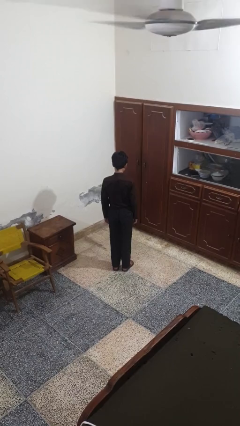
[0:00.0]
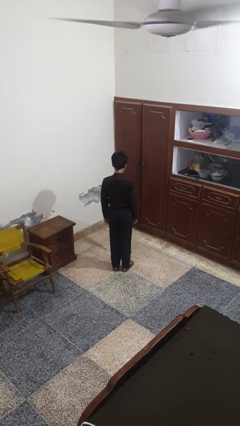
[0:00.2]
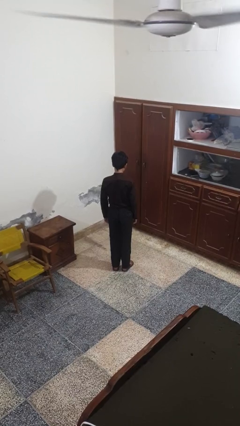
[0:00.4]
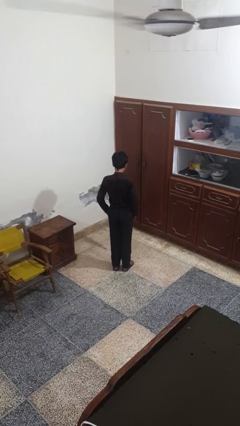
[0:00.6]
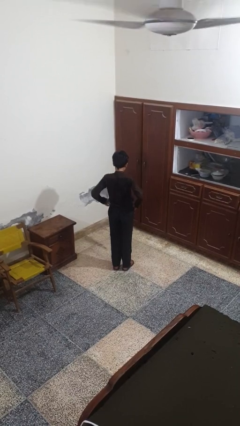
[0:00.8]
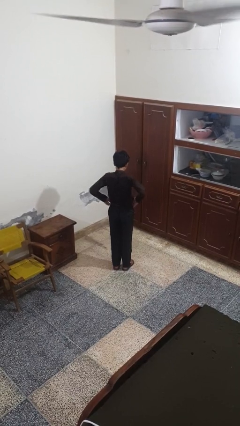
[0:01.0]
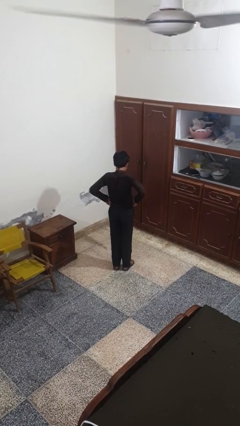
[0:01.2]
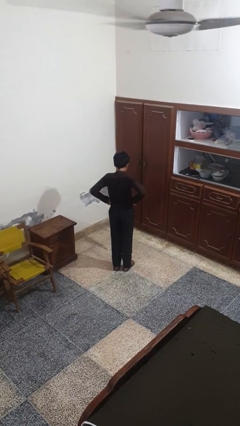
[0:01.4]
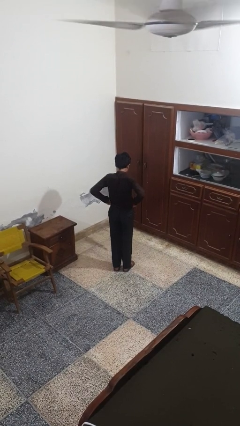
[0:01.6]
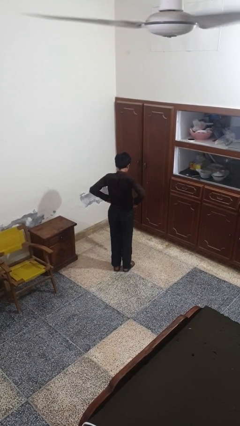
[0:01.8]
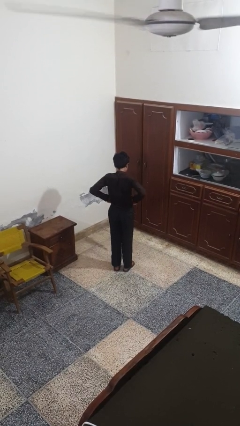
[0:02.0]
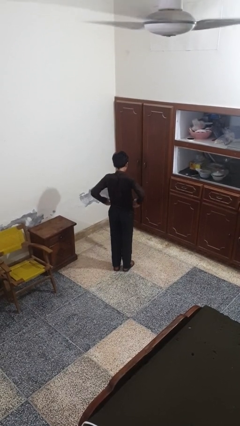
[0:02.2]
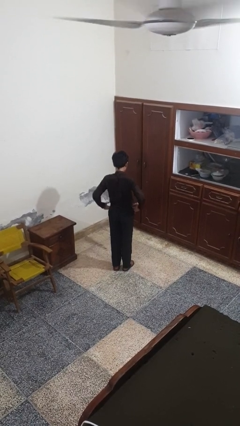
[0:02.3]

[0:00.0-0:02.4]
person hikes up pants

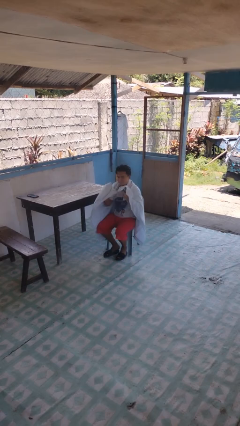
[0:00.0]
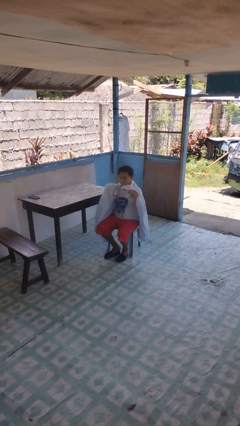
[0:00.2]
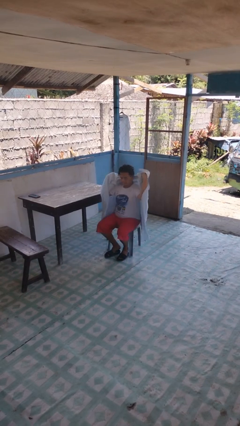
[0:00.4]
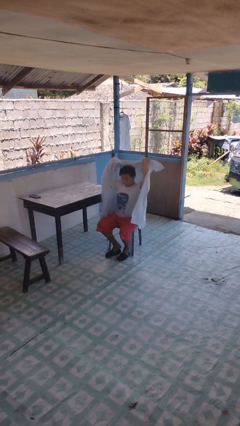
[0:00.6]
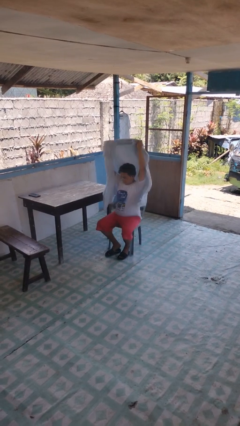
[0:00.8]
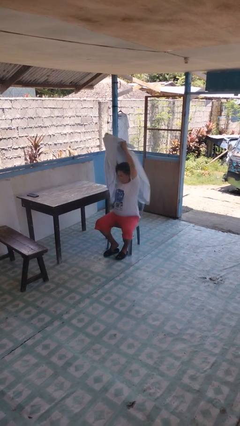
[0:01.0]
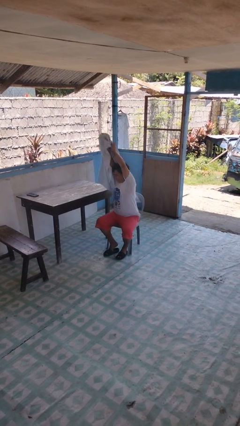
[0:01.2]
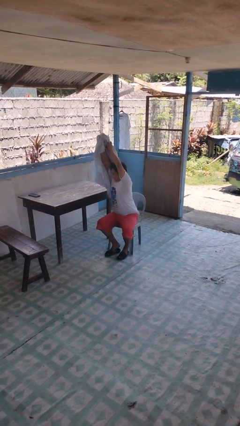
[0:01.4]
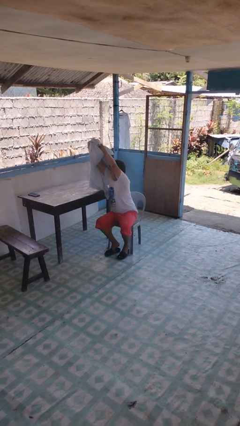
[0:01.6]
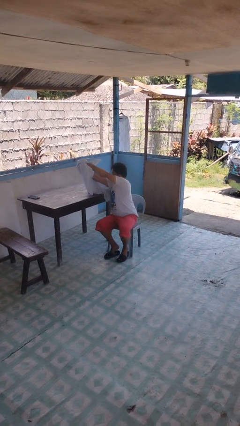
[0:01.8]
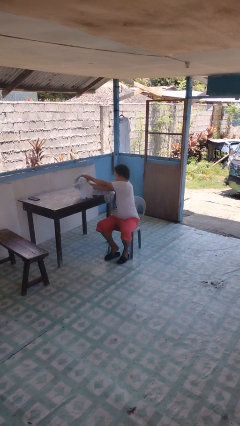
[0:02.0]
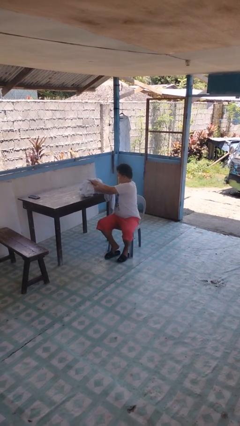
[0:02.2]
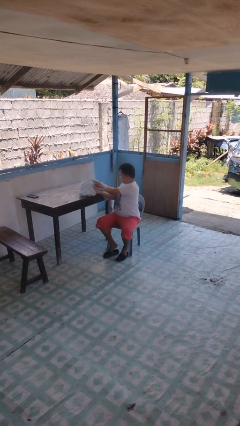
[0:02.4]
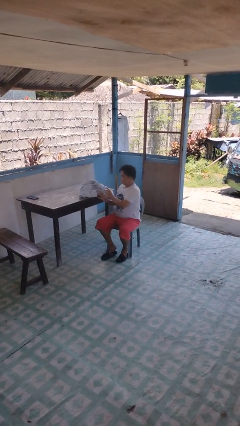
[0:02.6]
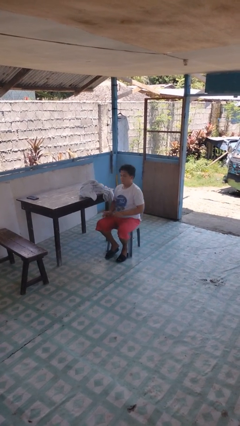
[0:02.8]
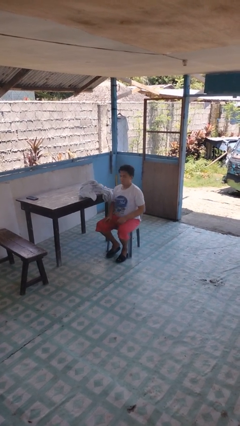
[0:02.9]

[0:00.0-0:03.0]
person uncovers with blanket

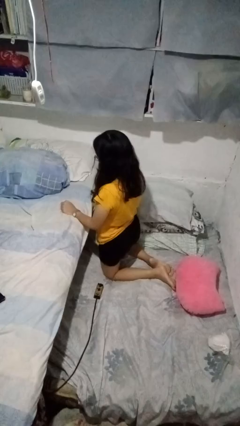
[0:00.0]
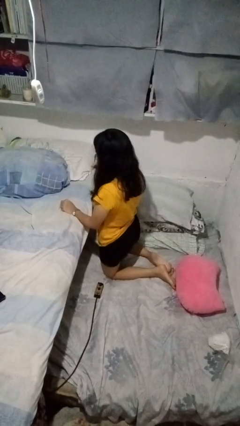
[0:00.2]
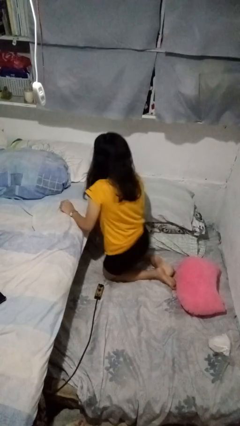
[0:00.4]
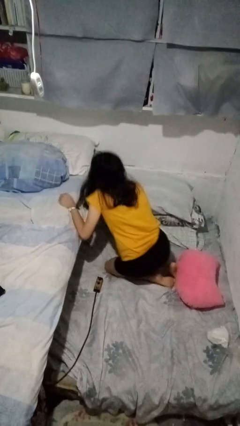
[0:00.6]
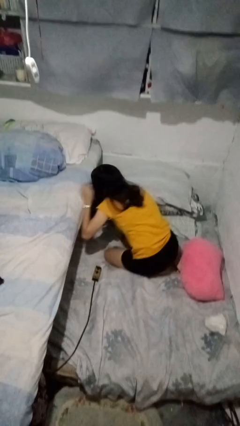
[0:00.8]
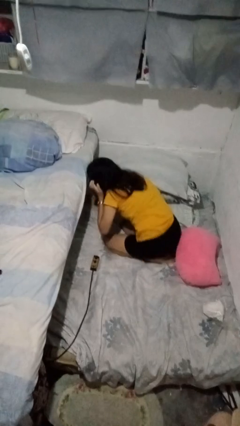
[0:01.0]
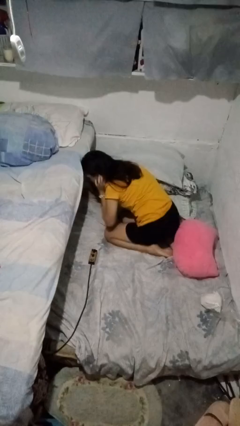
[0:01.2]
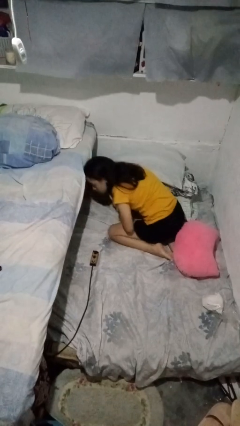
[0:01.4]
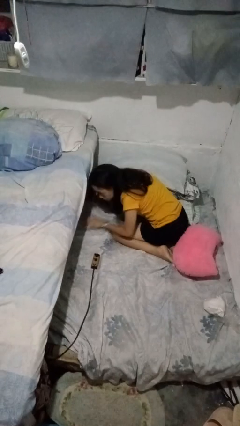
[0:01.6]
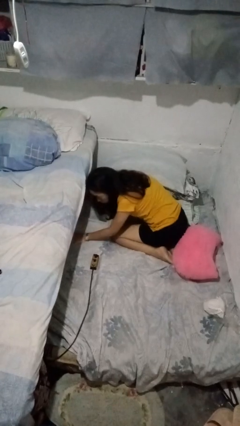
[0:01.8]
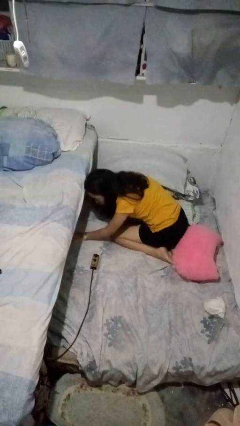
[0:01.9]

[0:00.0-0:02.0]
person searches under bed

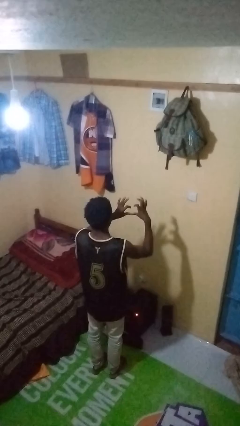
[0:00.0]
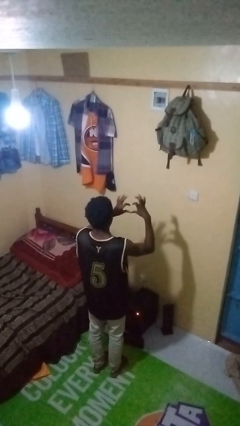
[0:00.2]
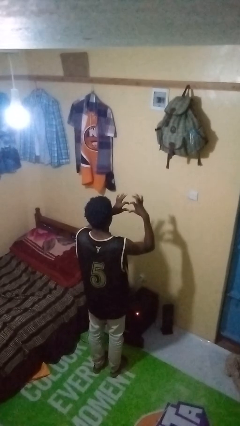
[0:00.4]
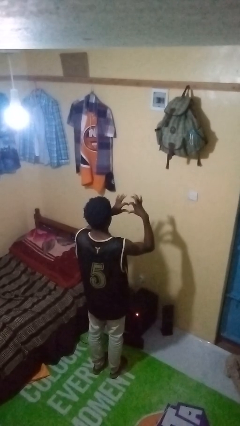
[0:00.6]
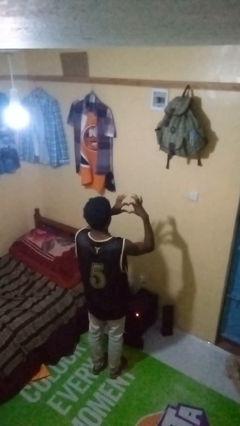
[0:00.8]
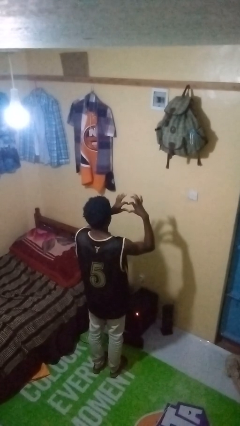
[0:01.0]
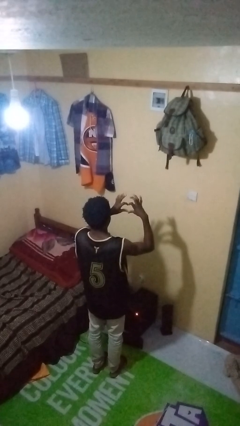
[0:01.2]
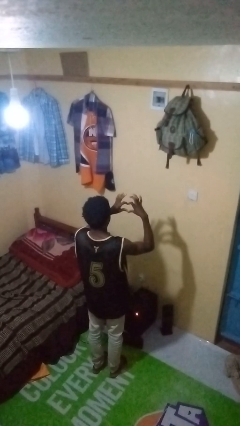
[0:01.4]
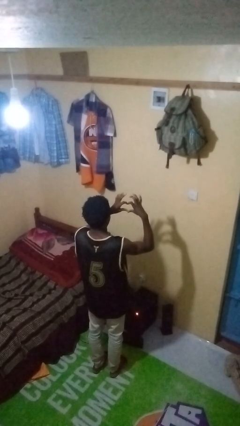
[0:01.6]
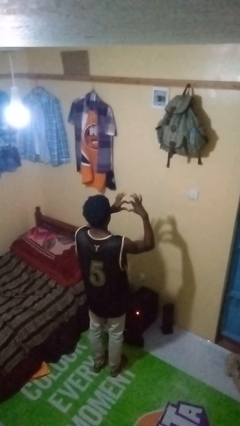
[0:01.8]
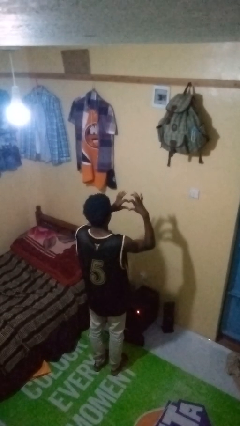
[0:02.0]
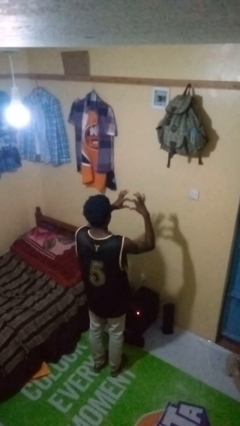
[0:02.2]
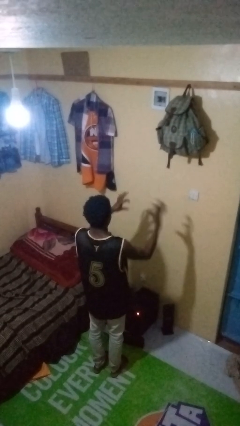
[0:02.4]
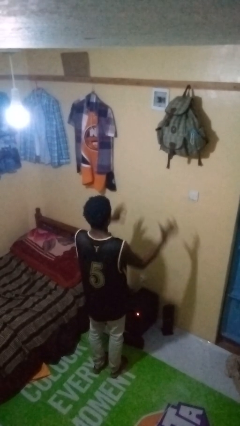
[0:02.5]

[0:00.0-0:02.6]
person gestures heart

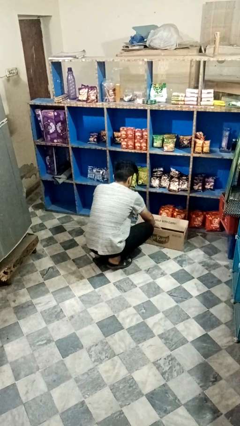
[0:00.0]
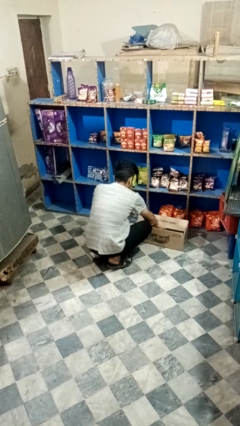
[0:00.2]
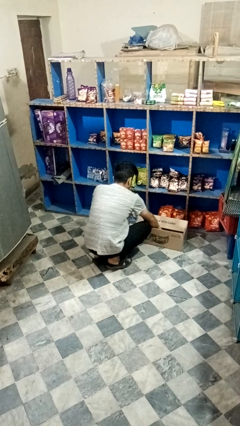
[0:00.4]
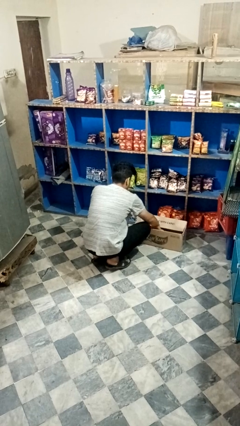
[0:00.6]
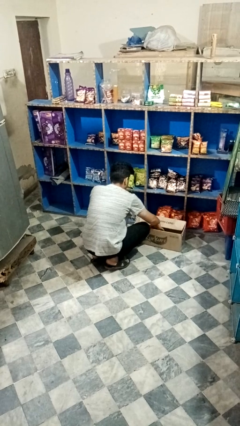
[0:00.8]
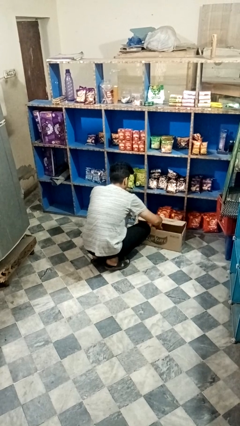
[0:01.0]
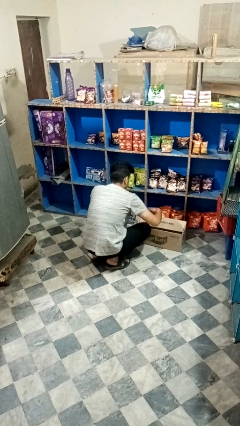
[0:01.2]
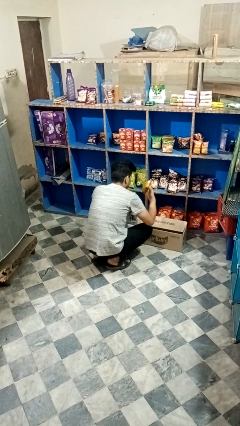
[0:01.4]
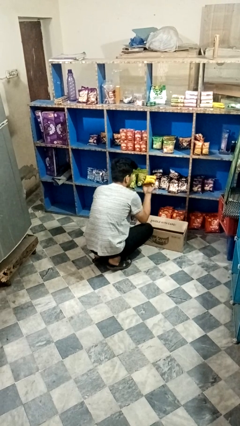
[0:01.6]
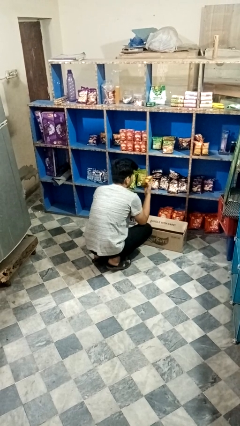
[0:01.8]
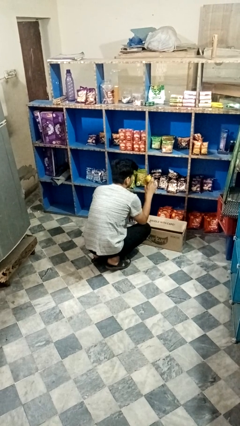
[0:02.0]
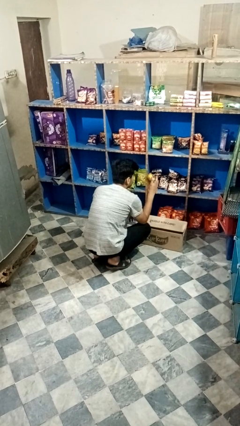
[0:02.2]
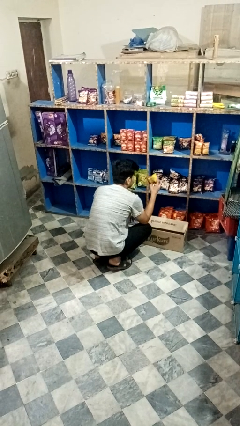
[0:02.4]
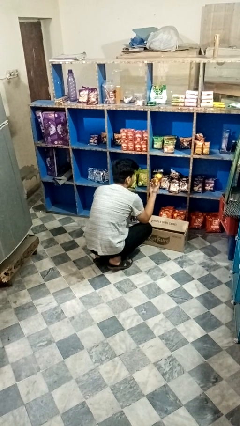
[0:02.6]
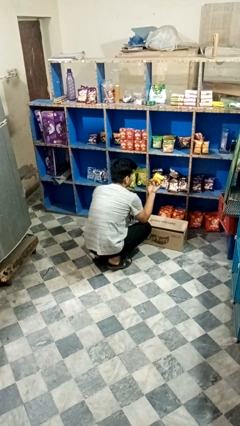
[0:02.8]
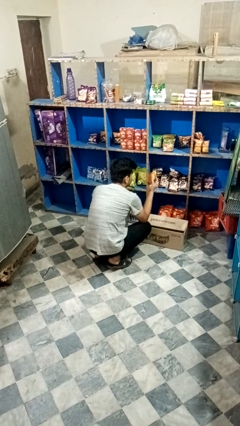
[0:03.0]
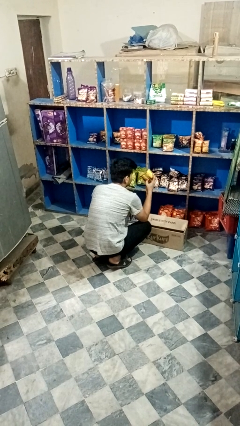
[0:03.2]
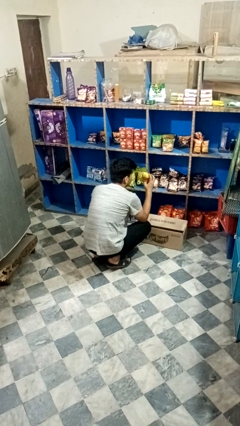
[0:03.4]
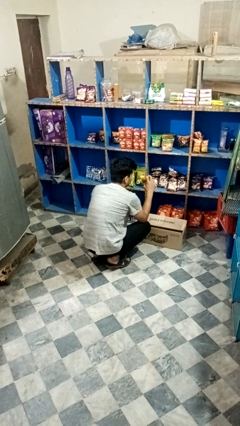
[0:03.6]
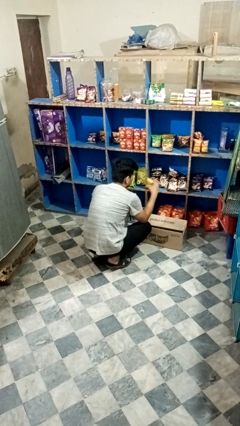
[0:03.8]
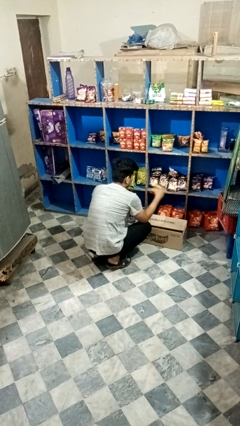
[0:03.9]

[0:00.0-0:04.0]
person takes object from box

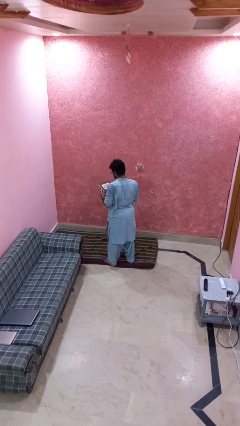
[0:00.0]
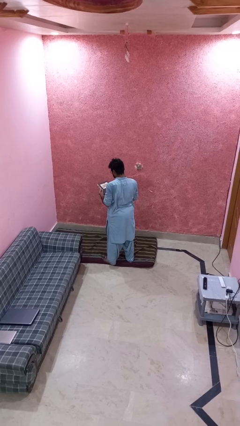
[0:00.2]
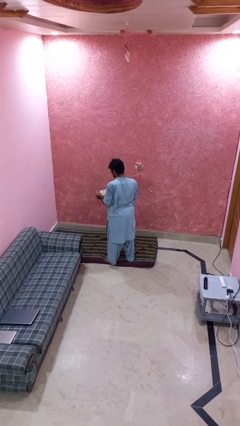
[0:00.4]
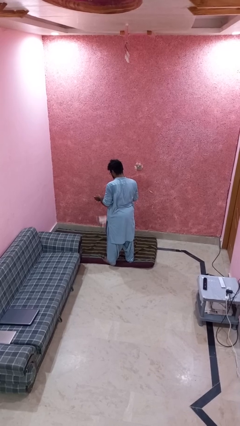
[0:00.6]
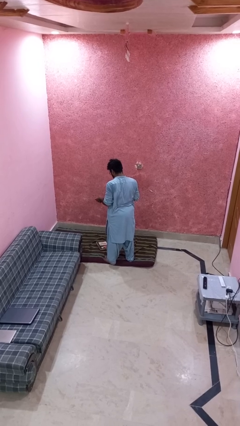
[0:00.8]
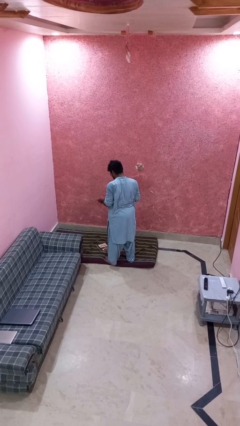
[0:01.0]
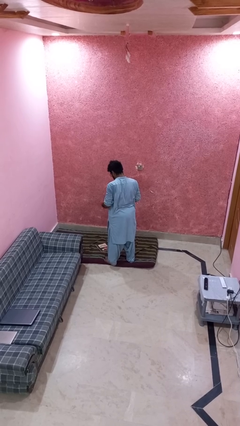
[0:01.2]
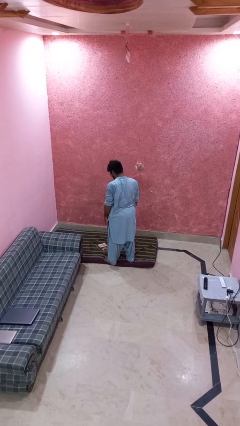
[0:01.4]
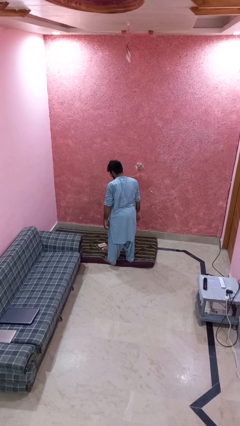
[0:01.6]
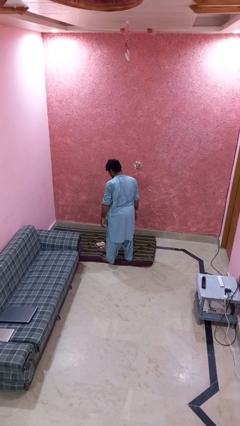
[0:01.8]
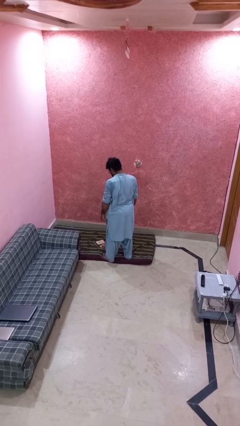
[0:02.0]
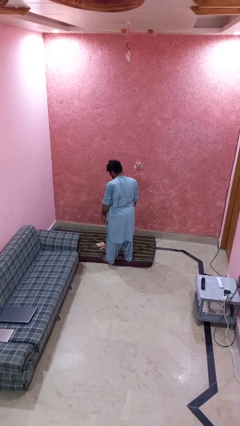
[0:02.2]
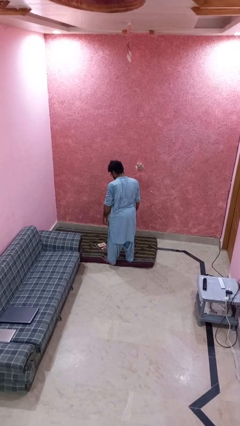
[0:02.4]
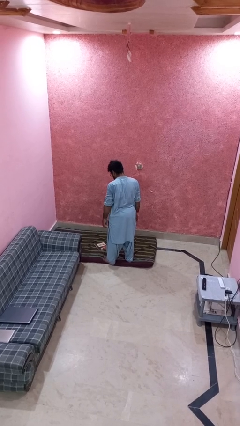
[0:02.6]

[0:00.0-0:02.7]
person drops object

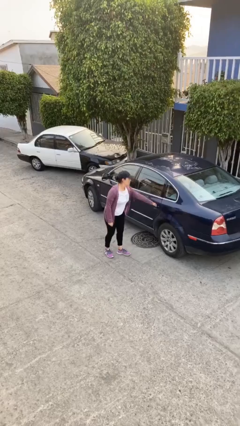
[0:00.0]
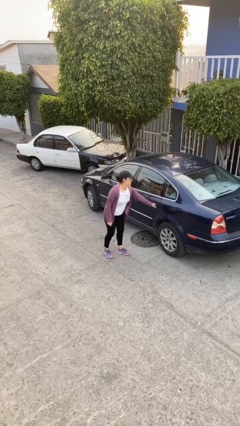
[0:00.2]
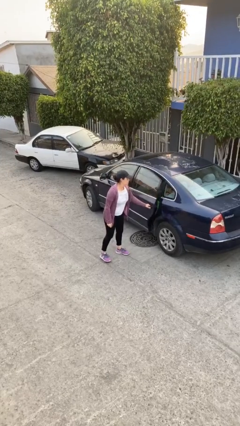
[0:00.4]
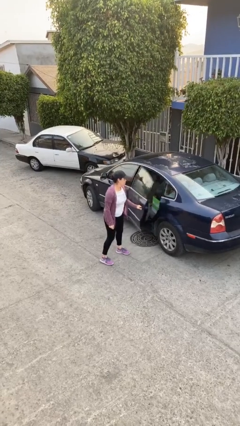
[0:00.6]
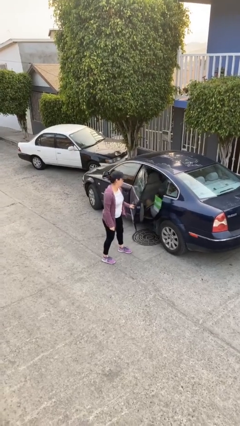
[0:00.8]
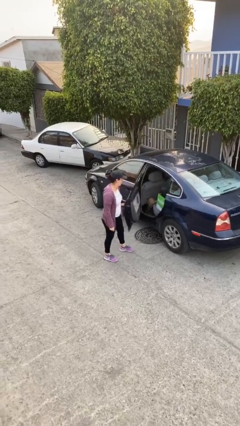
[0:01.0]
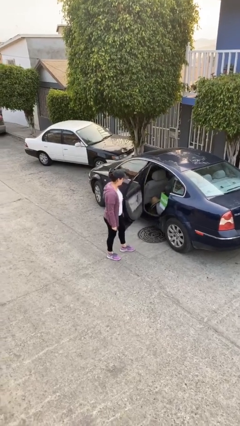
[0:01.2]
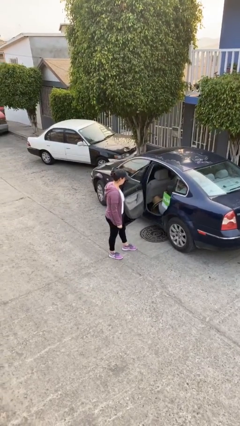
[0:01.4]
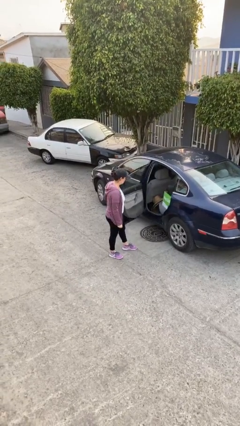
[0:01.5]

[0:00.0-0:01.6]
person opens car door
